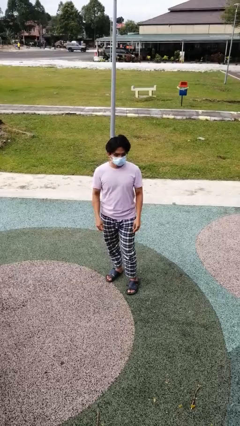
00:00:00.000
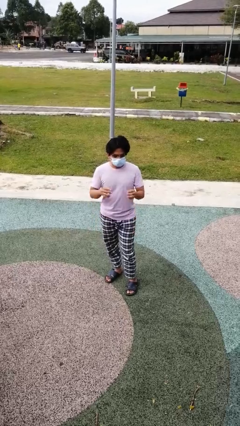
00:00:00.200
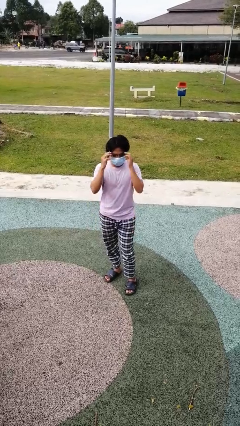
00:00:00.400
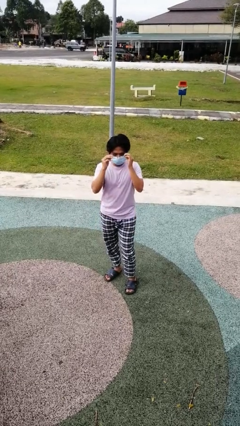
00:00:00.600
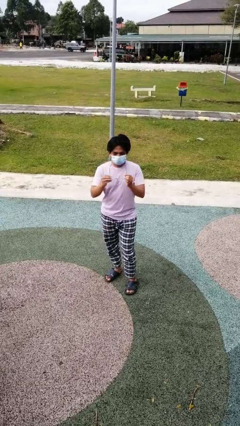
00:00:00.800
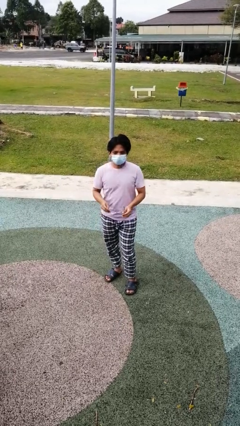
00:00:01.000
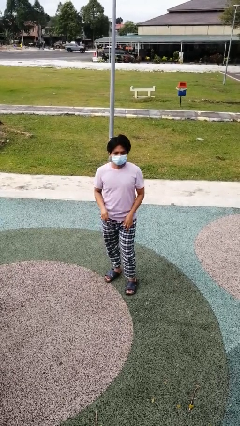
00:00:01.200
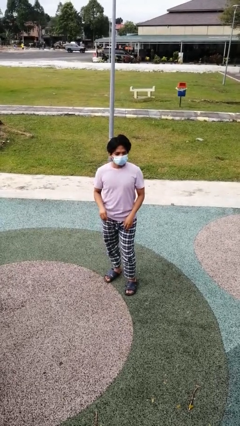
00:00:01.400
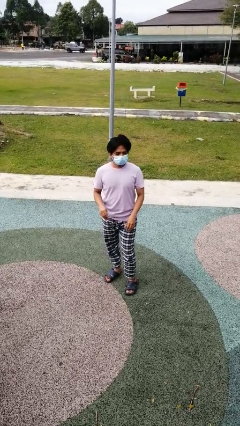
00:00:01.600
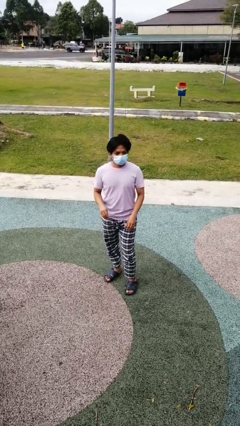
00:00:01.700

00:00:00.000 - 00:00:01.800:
person takes off glasses

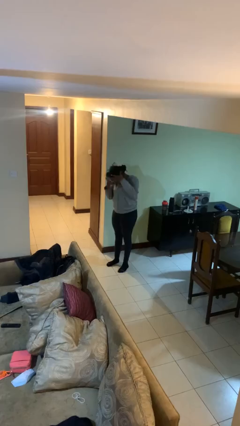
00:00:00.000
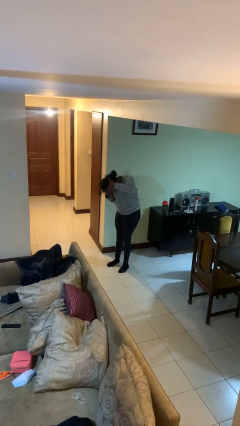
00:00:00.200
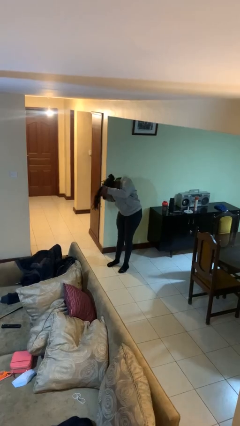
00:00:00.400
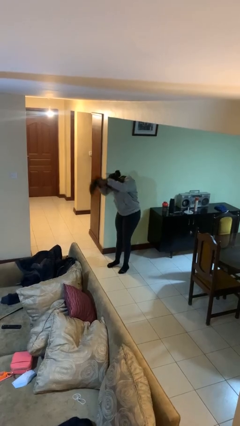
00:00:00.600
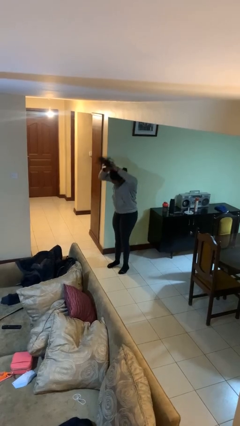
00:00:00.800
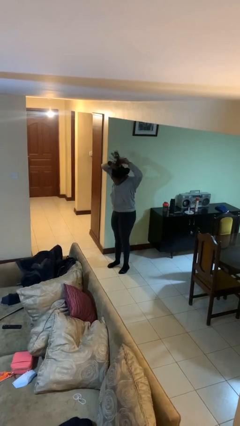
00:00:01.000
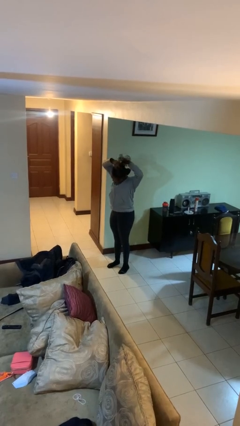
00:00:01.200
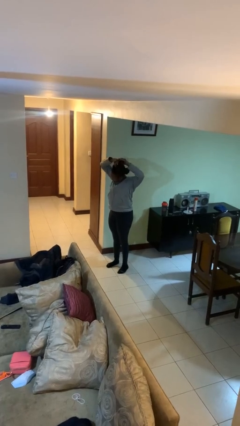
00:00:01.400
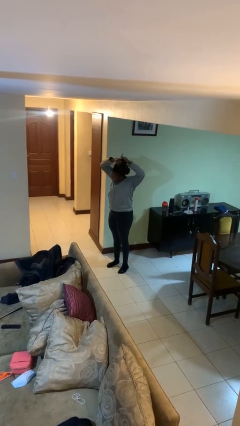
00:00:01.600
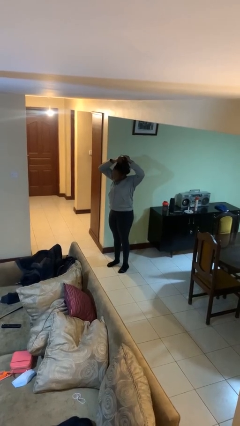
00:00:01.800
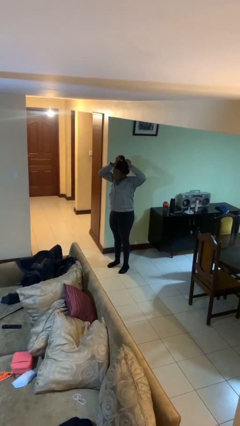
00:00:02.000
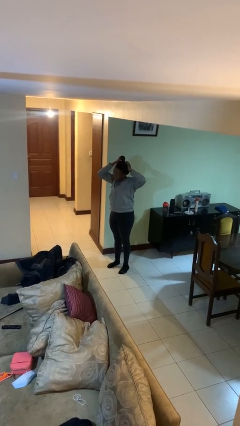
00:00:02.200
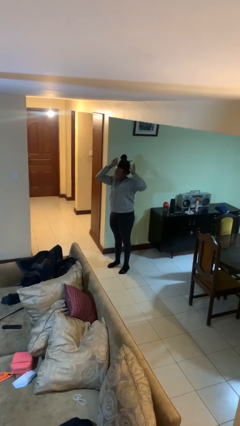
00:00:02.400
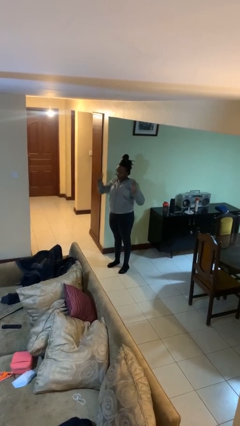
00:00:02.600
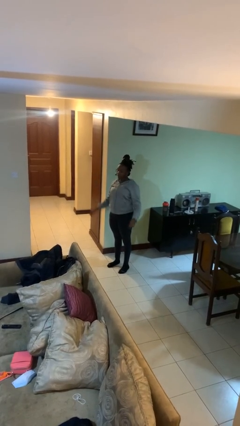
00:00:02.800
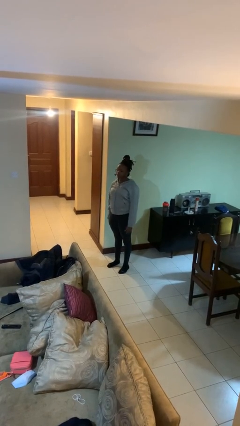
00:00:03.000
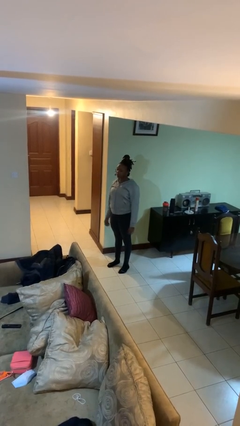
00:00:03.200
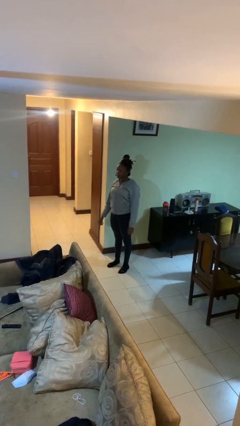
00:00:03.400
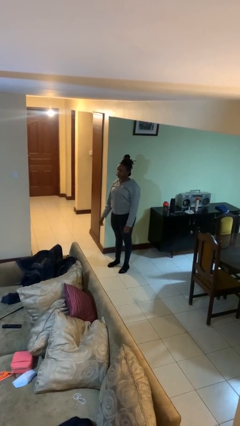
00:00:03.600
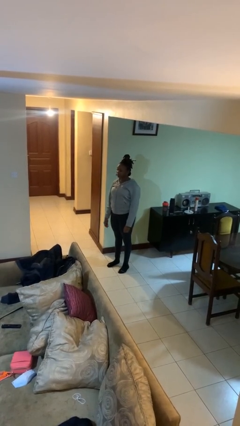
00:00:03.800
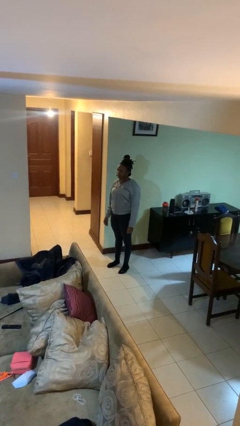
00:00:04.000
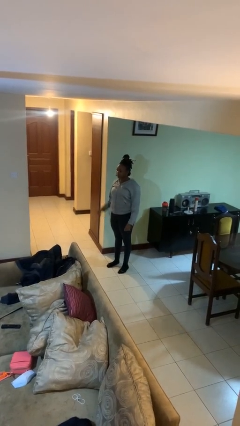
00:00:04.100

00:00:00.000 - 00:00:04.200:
person puts hair in ponytail

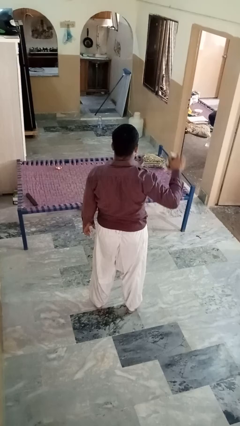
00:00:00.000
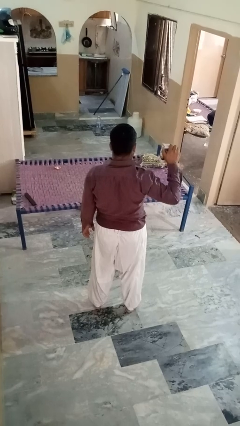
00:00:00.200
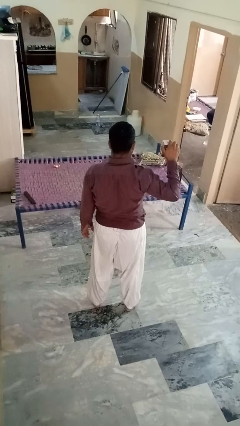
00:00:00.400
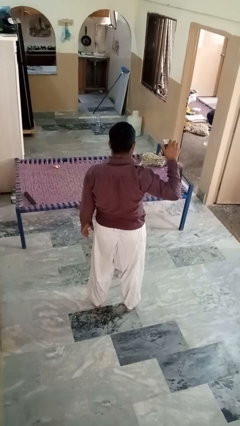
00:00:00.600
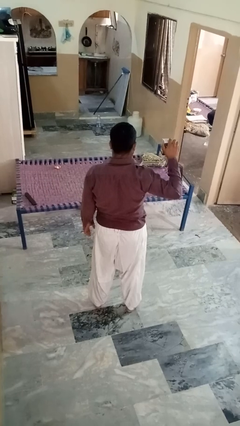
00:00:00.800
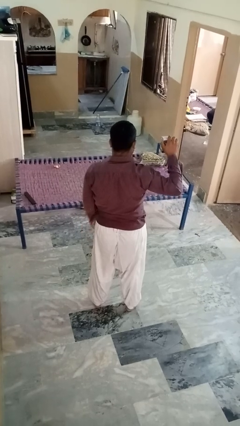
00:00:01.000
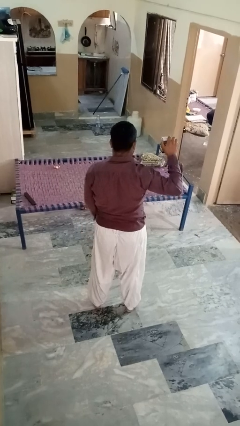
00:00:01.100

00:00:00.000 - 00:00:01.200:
person drops object

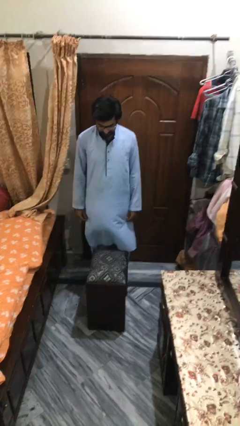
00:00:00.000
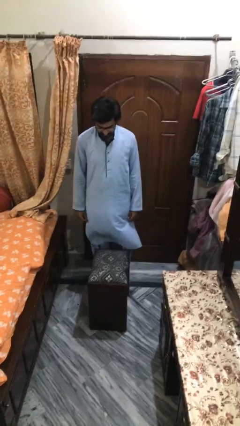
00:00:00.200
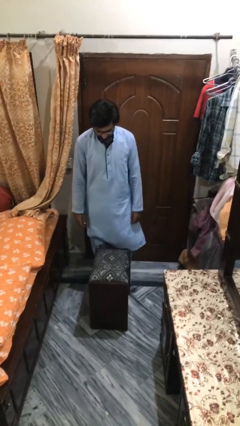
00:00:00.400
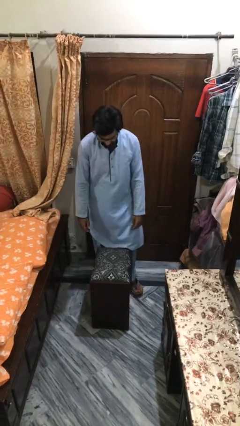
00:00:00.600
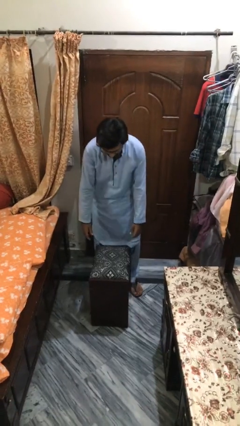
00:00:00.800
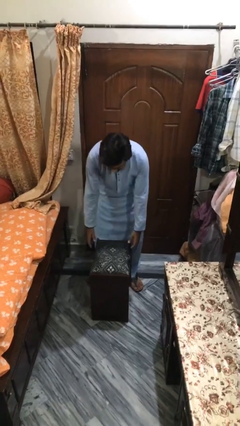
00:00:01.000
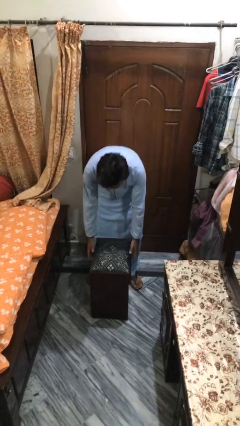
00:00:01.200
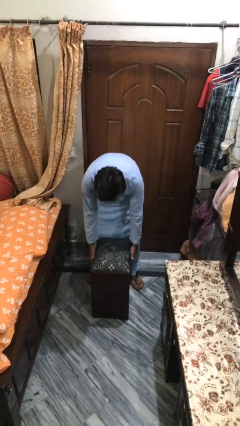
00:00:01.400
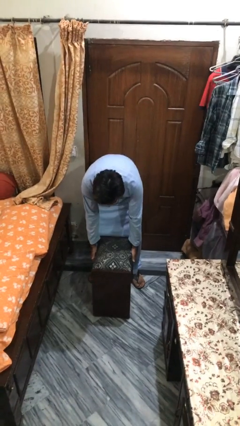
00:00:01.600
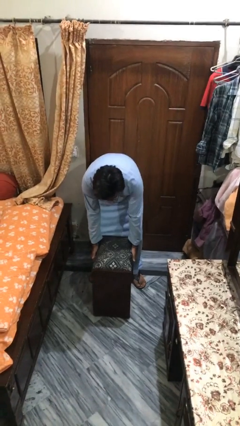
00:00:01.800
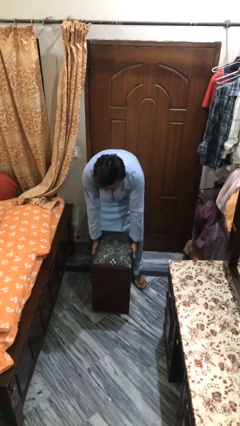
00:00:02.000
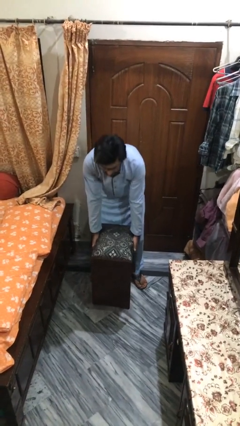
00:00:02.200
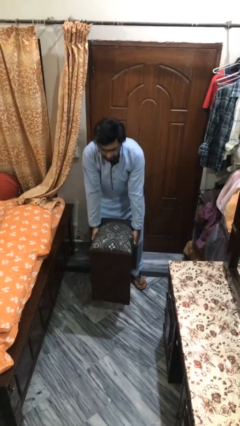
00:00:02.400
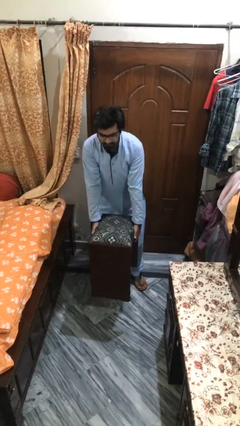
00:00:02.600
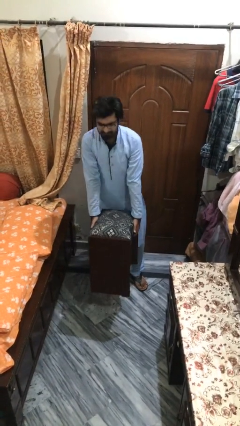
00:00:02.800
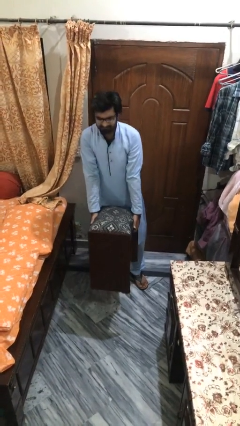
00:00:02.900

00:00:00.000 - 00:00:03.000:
person picks up object from floor

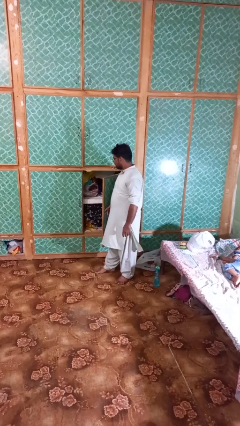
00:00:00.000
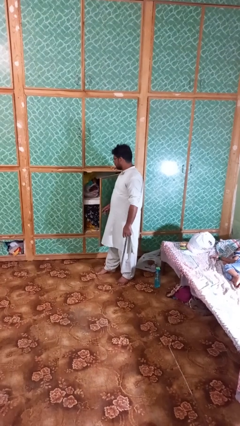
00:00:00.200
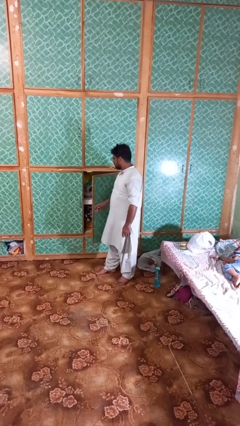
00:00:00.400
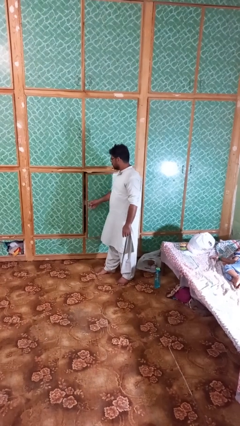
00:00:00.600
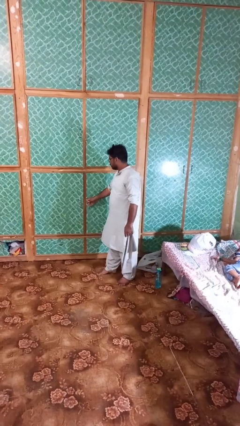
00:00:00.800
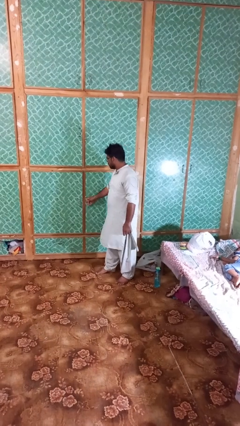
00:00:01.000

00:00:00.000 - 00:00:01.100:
person closes closet door

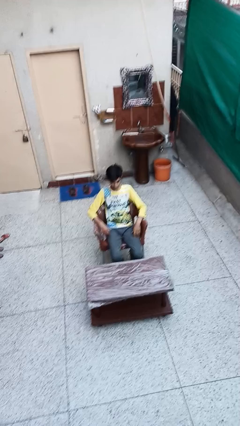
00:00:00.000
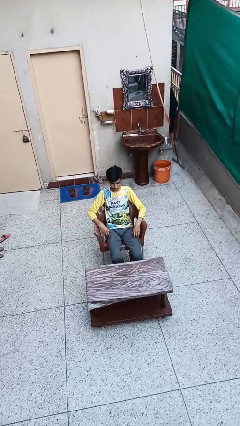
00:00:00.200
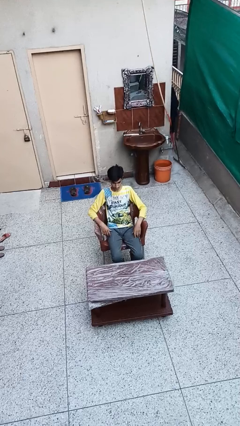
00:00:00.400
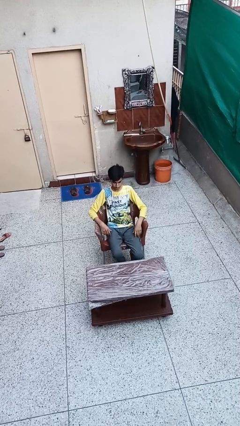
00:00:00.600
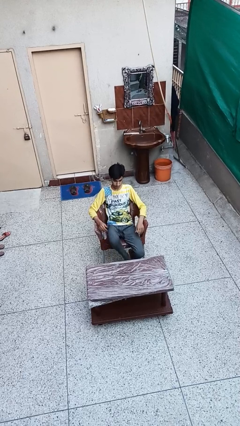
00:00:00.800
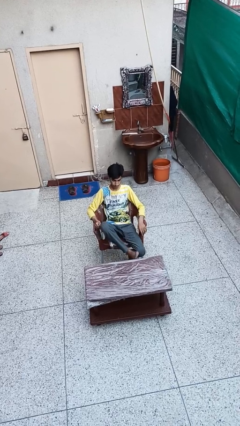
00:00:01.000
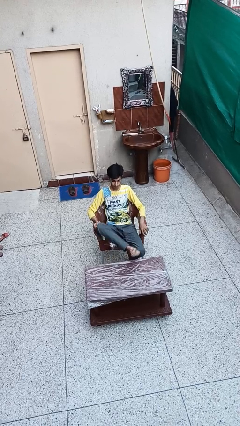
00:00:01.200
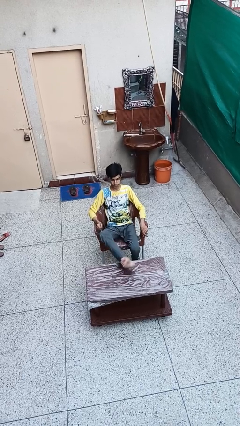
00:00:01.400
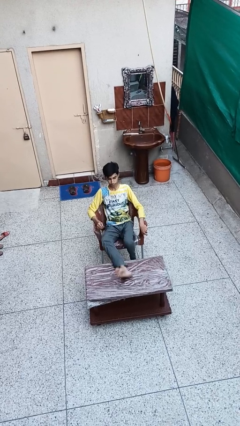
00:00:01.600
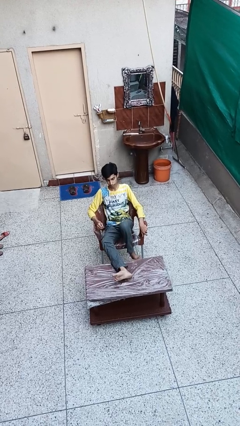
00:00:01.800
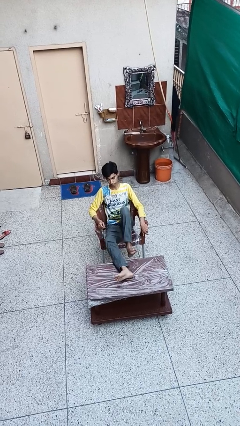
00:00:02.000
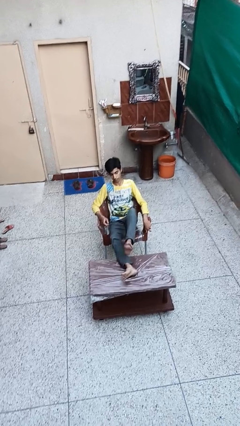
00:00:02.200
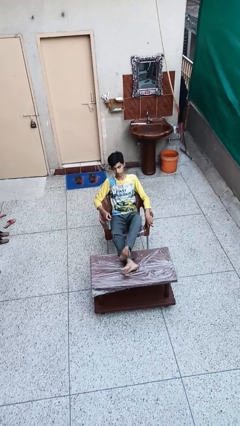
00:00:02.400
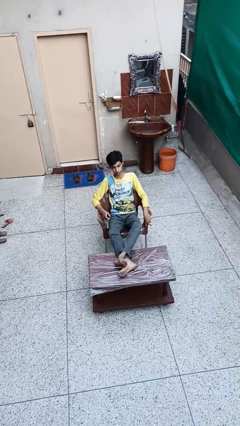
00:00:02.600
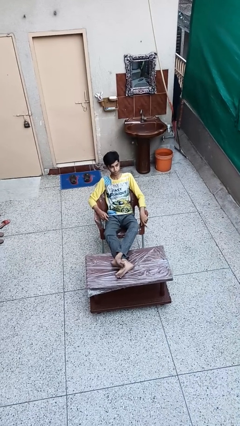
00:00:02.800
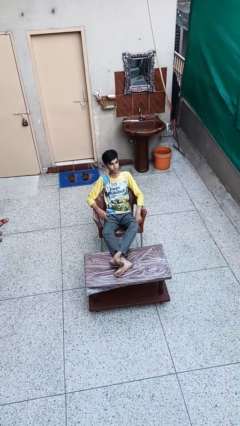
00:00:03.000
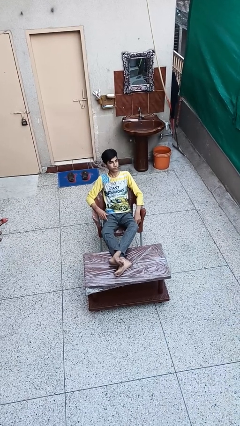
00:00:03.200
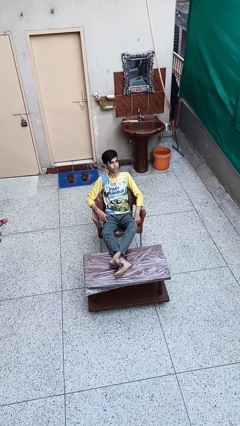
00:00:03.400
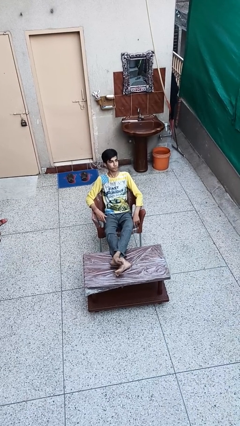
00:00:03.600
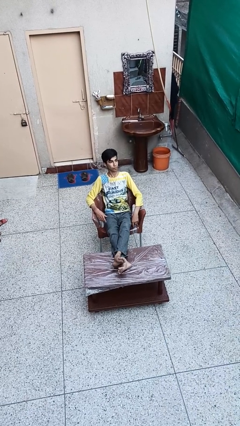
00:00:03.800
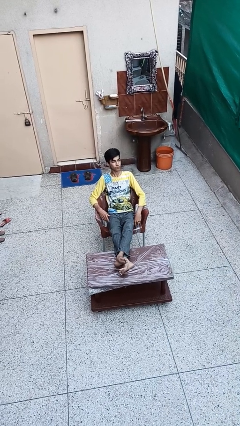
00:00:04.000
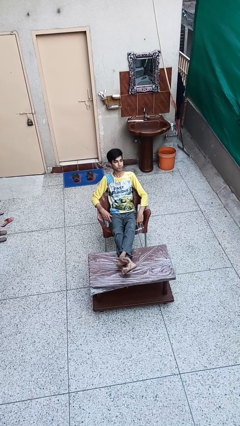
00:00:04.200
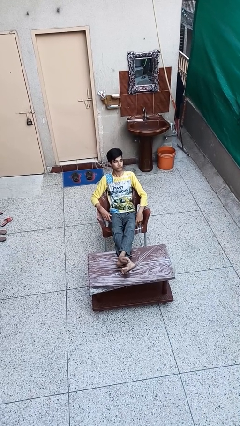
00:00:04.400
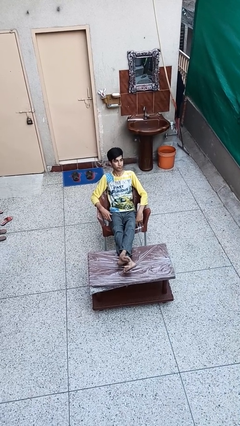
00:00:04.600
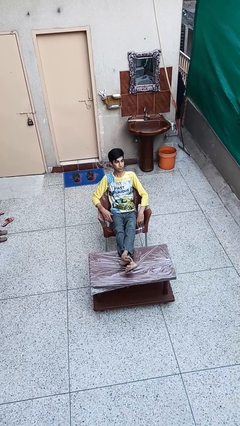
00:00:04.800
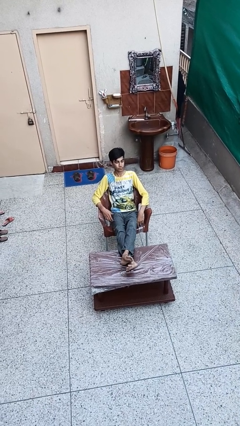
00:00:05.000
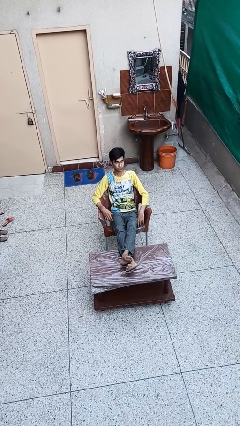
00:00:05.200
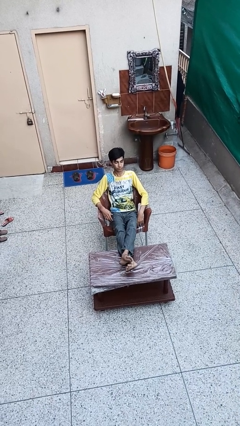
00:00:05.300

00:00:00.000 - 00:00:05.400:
person puts feet up

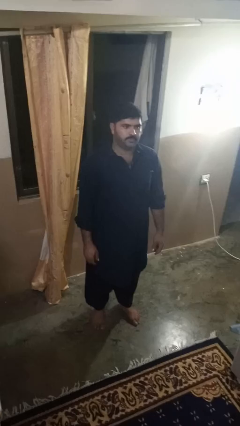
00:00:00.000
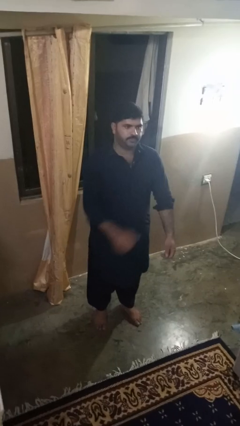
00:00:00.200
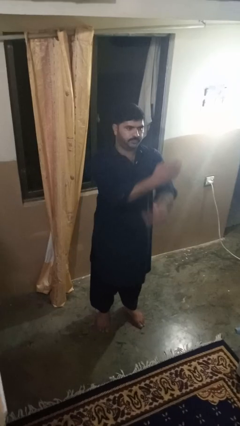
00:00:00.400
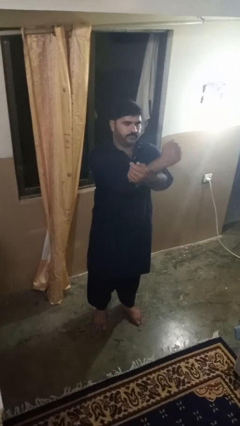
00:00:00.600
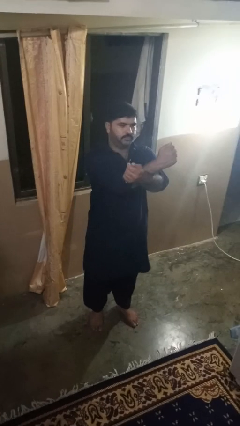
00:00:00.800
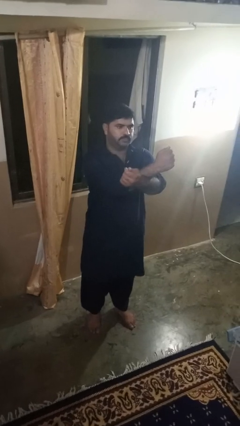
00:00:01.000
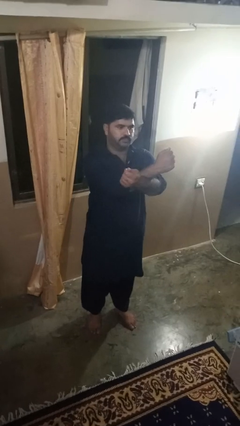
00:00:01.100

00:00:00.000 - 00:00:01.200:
person crosses arms
